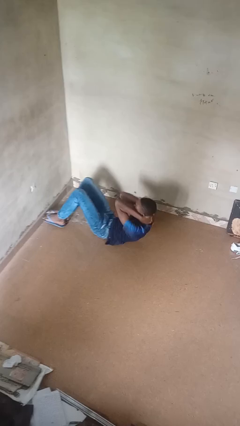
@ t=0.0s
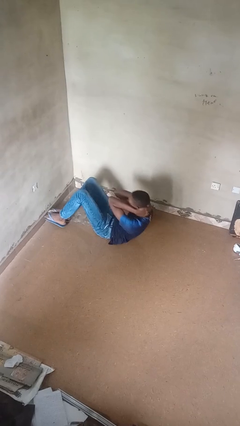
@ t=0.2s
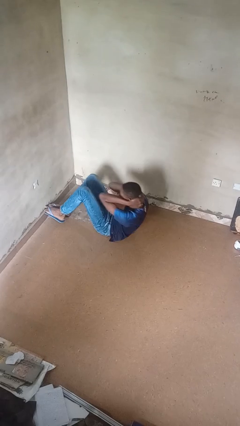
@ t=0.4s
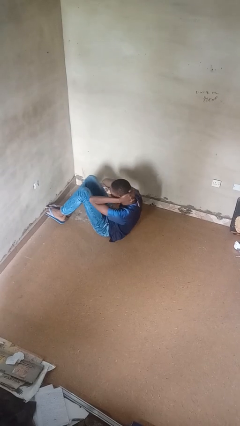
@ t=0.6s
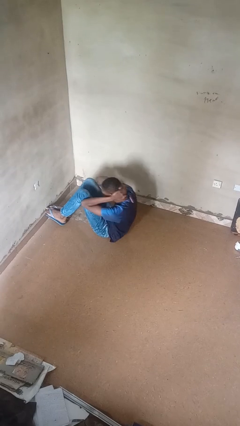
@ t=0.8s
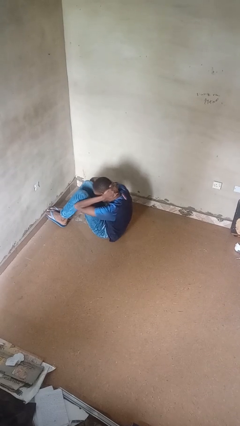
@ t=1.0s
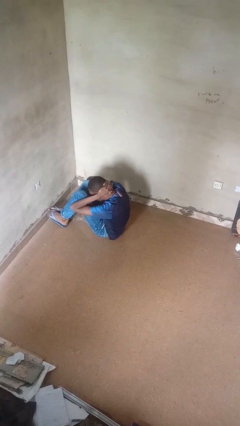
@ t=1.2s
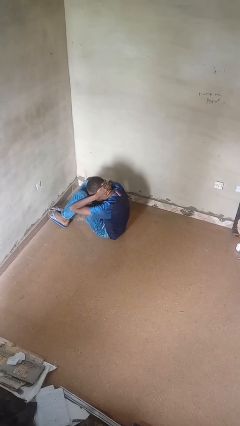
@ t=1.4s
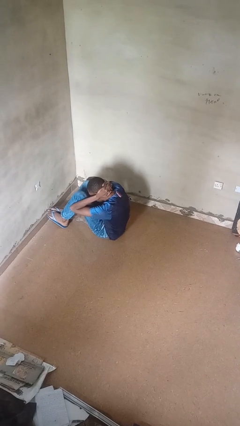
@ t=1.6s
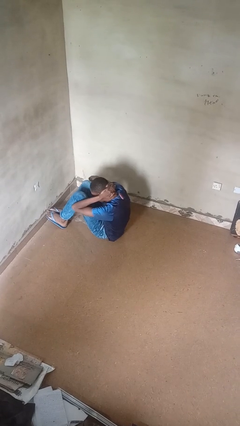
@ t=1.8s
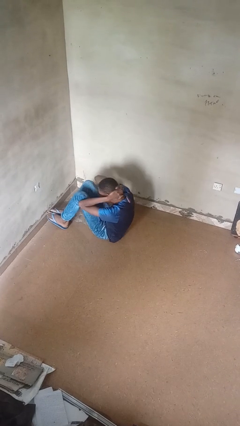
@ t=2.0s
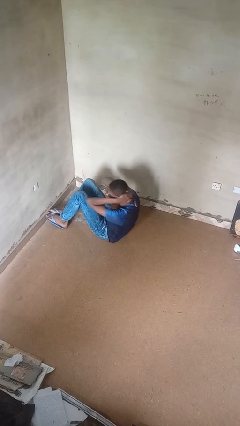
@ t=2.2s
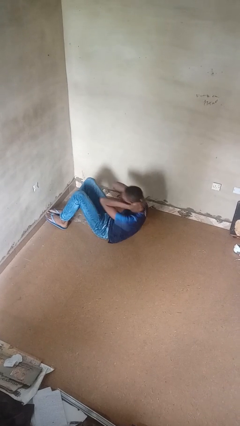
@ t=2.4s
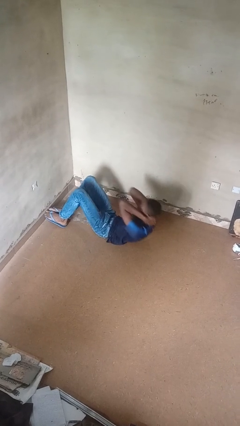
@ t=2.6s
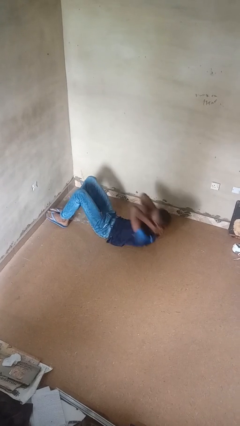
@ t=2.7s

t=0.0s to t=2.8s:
person exercises with situp

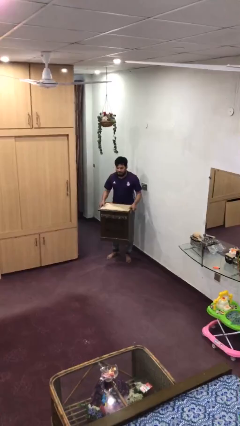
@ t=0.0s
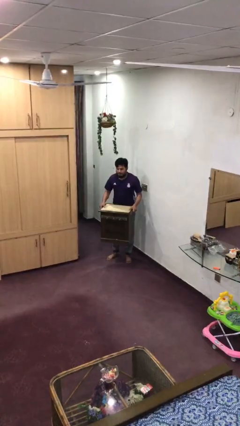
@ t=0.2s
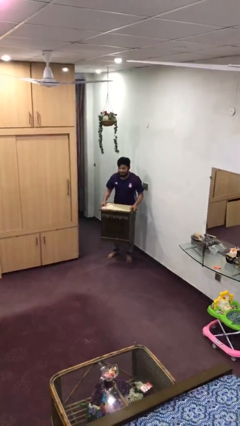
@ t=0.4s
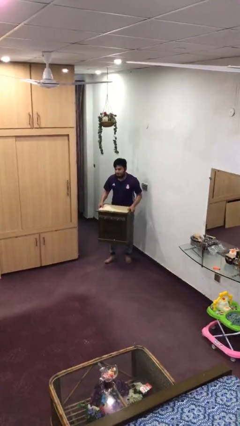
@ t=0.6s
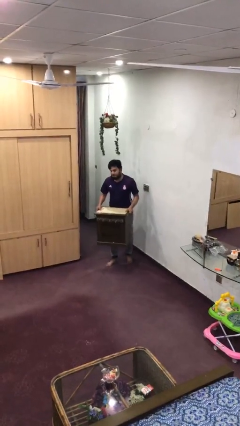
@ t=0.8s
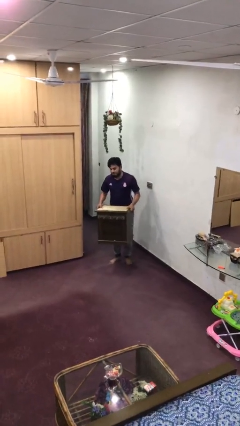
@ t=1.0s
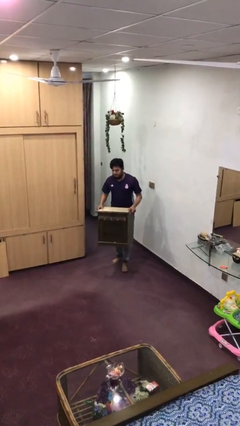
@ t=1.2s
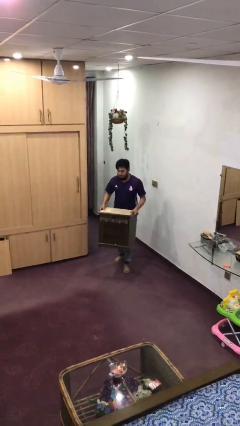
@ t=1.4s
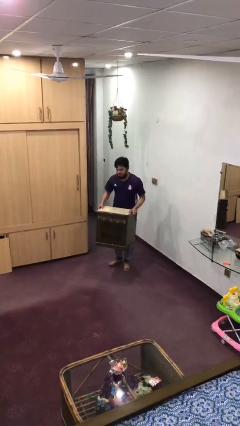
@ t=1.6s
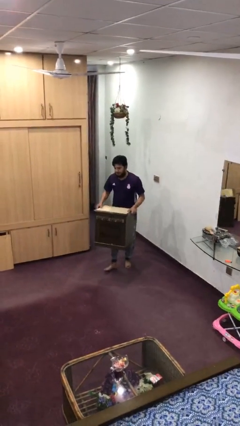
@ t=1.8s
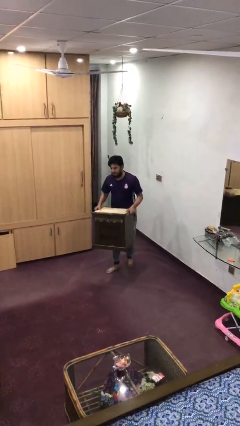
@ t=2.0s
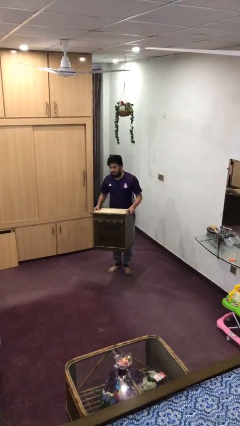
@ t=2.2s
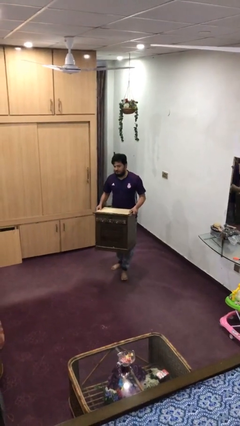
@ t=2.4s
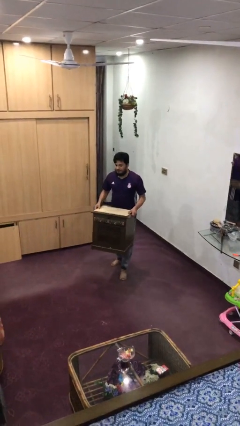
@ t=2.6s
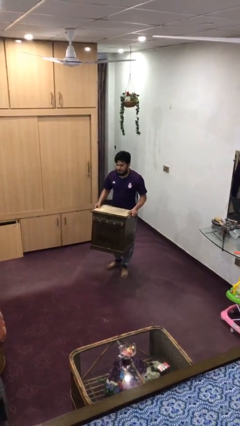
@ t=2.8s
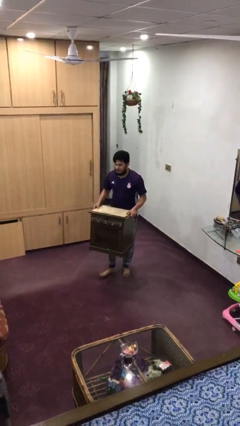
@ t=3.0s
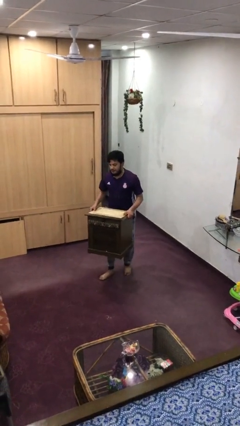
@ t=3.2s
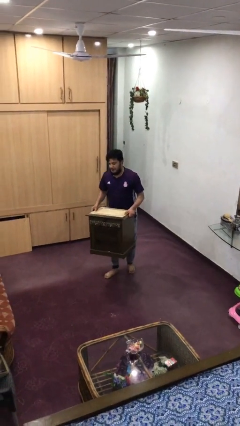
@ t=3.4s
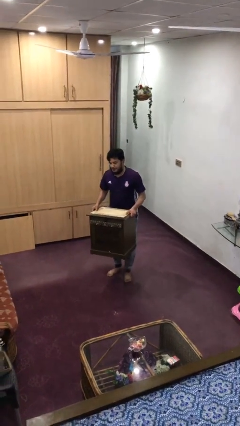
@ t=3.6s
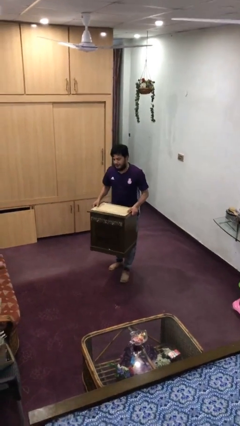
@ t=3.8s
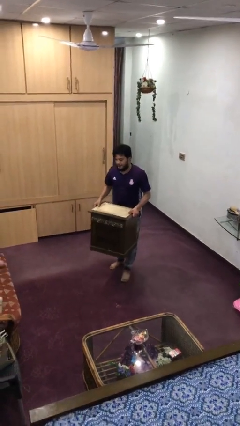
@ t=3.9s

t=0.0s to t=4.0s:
person carries heavy object

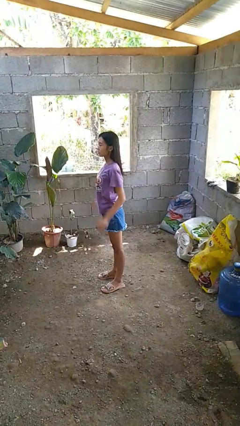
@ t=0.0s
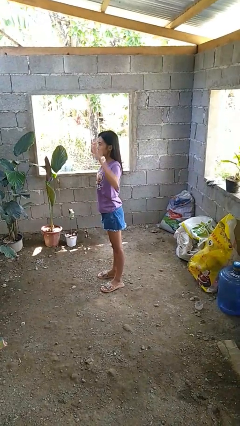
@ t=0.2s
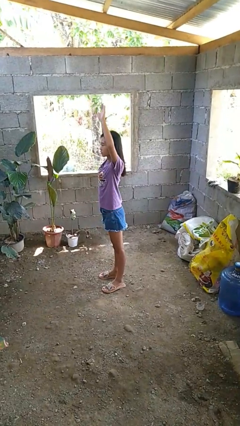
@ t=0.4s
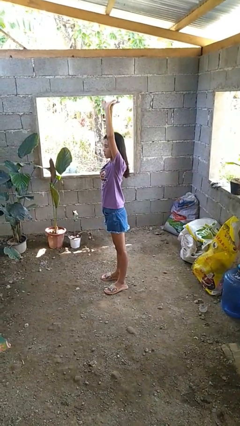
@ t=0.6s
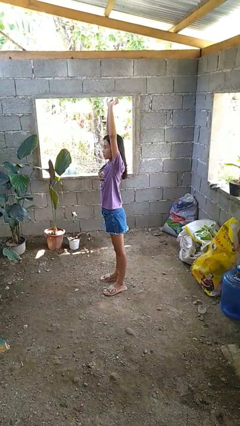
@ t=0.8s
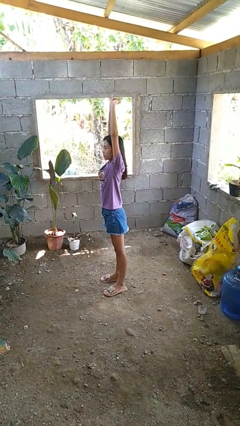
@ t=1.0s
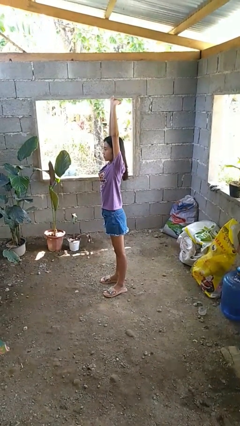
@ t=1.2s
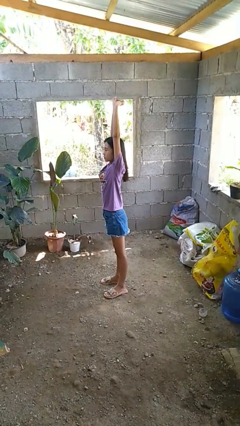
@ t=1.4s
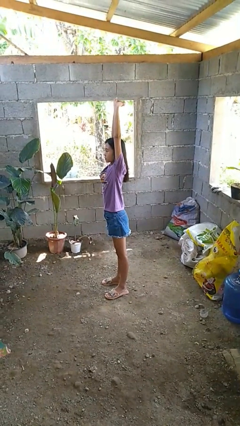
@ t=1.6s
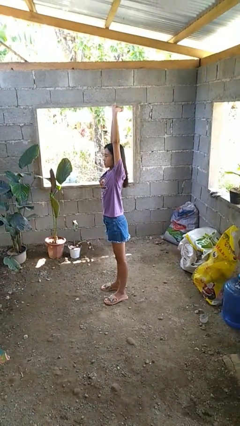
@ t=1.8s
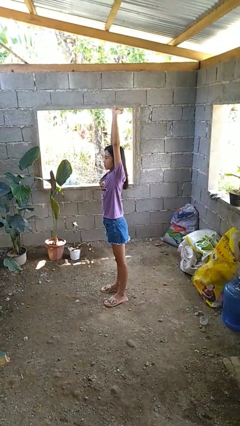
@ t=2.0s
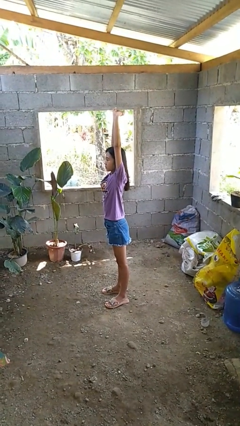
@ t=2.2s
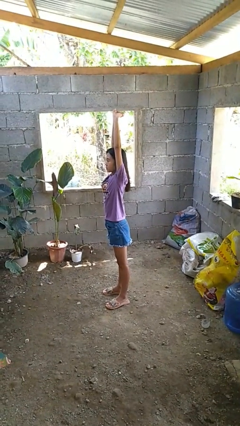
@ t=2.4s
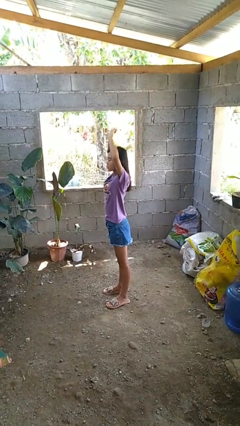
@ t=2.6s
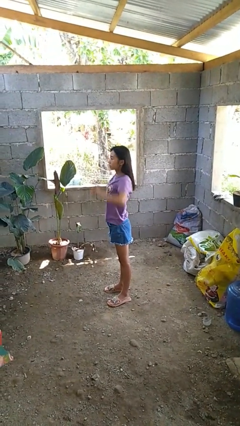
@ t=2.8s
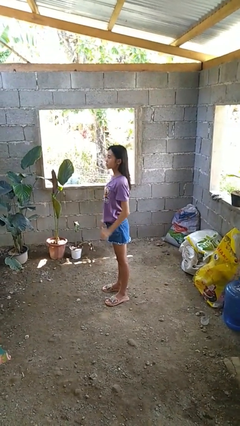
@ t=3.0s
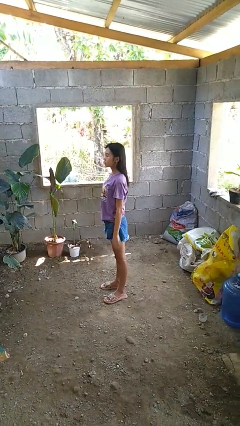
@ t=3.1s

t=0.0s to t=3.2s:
person stretches arms over head

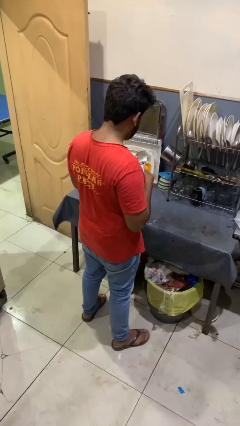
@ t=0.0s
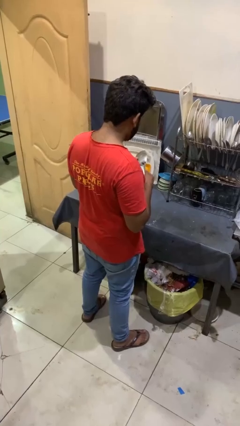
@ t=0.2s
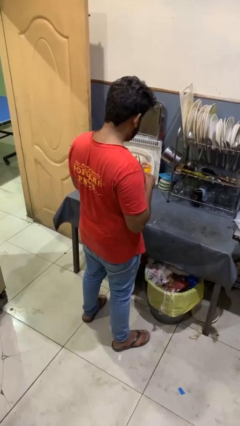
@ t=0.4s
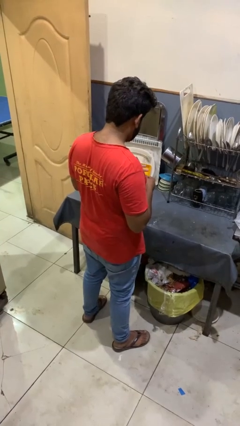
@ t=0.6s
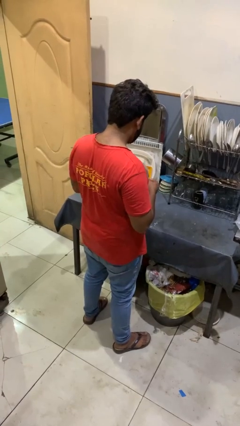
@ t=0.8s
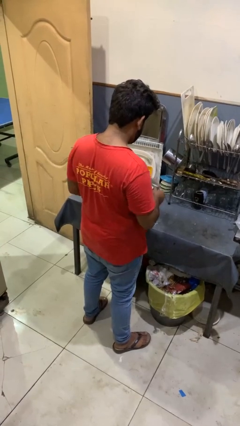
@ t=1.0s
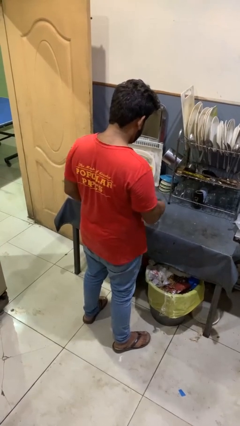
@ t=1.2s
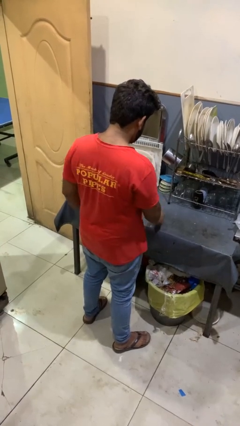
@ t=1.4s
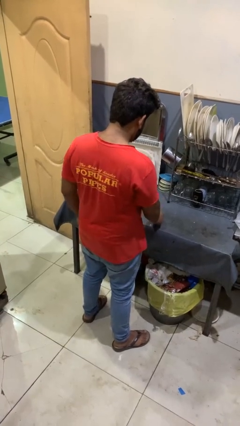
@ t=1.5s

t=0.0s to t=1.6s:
person puts down object on countertop

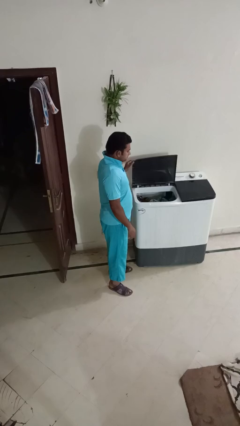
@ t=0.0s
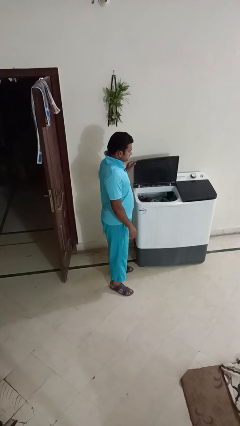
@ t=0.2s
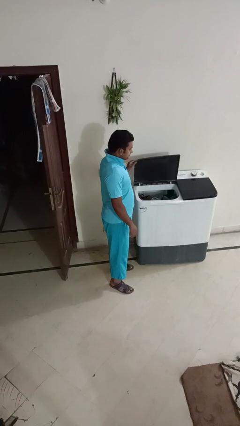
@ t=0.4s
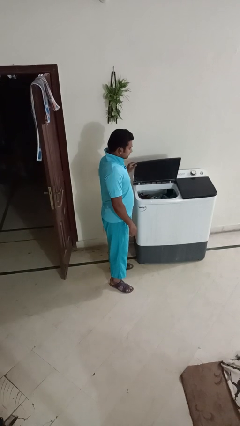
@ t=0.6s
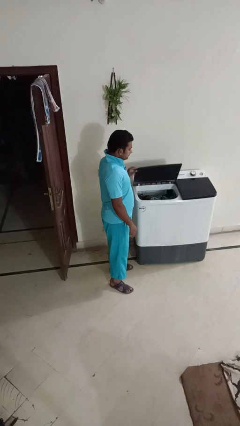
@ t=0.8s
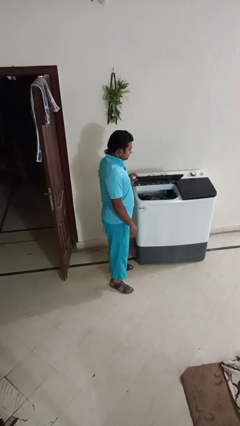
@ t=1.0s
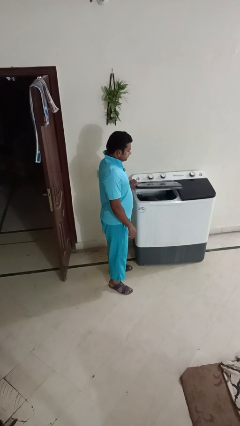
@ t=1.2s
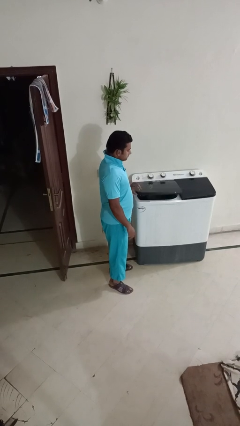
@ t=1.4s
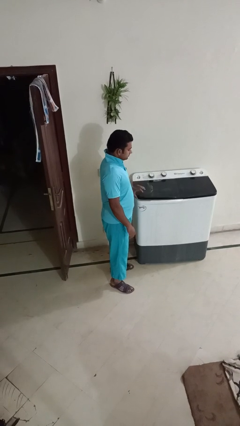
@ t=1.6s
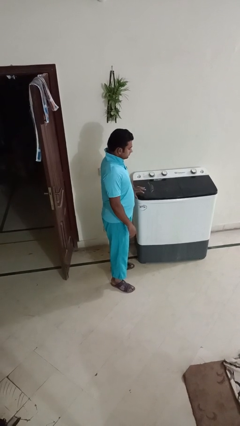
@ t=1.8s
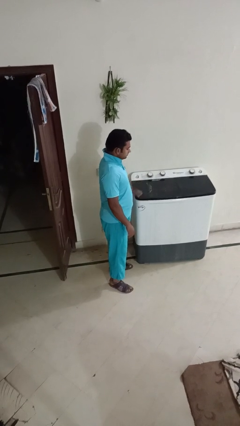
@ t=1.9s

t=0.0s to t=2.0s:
person closes clothes washer

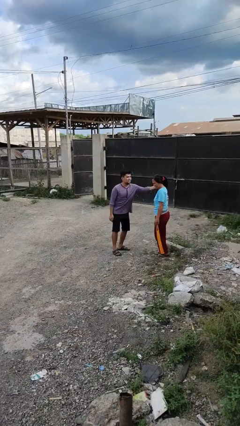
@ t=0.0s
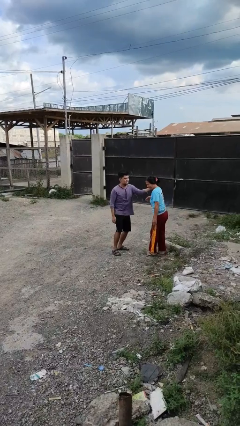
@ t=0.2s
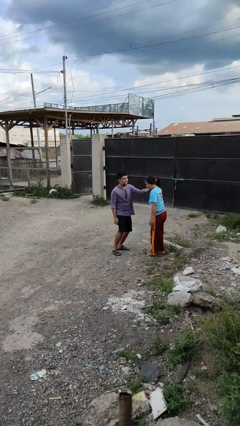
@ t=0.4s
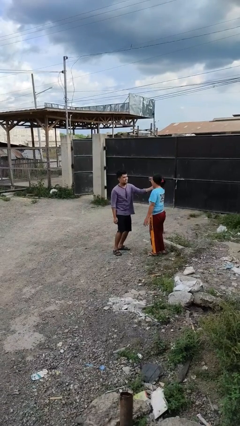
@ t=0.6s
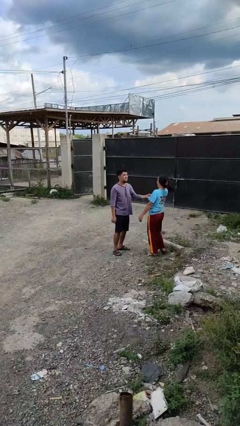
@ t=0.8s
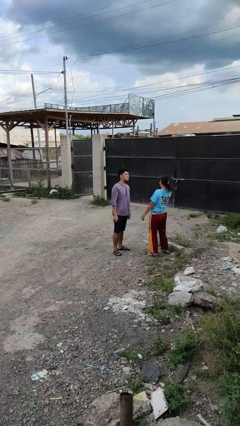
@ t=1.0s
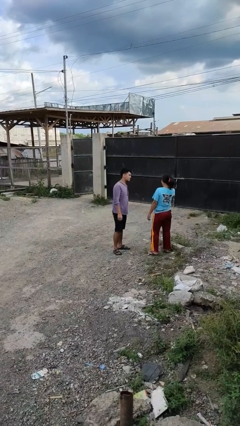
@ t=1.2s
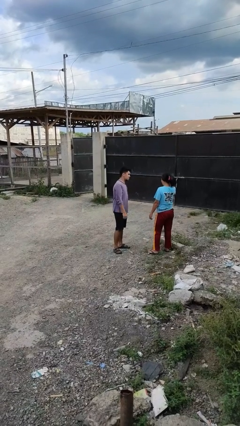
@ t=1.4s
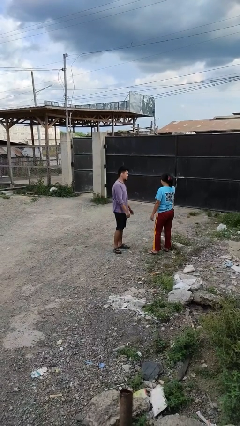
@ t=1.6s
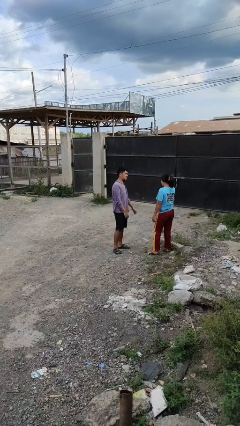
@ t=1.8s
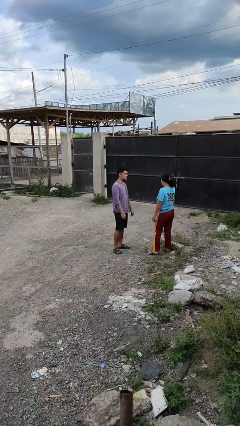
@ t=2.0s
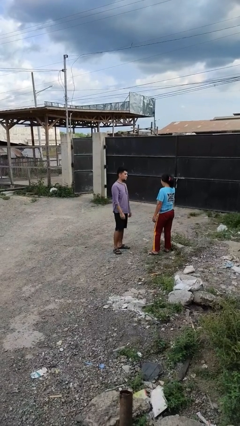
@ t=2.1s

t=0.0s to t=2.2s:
person tickles person

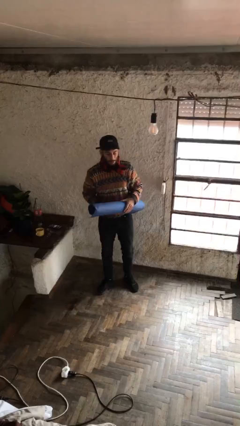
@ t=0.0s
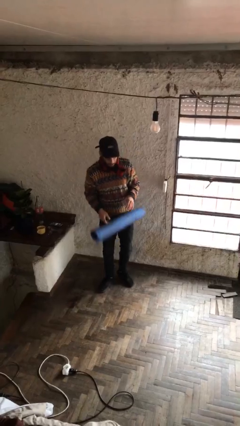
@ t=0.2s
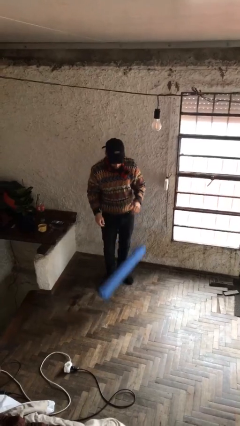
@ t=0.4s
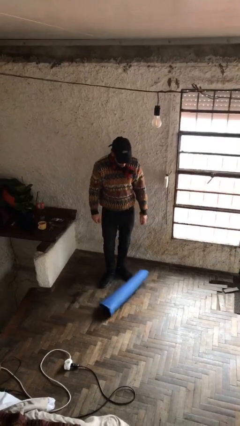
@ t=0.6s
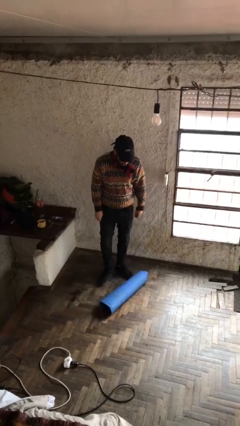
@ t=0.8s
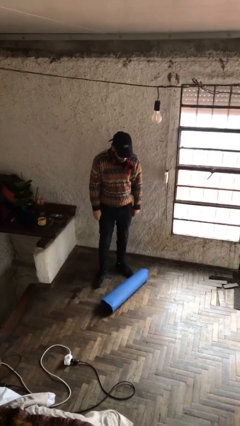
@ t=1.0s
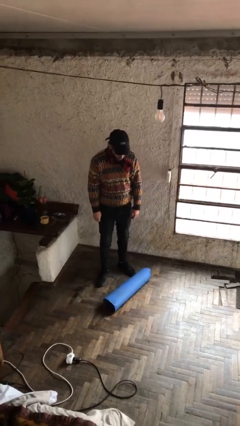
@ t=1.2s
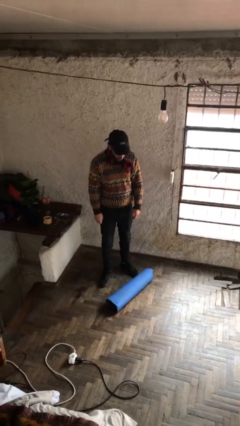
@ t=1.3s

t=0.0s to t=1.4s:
person drops object
